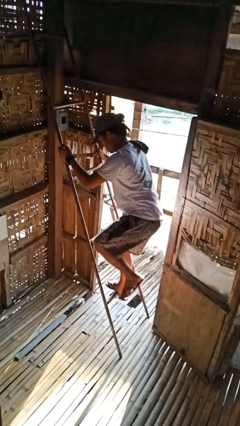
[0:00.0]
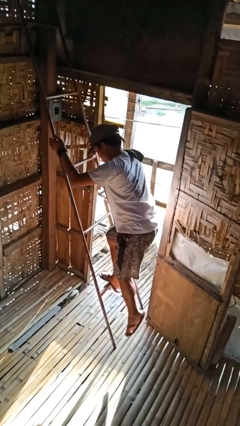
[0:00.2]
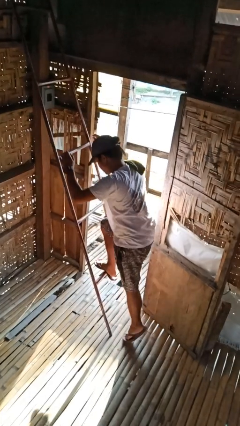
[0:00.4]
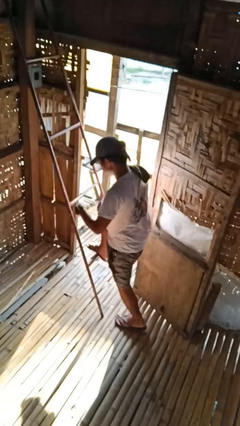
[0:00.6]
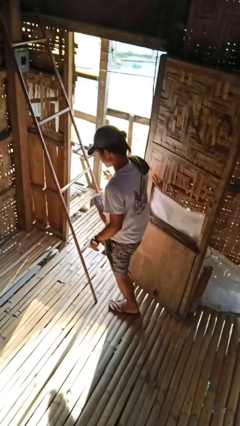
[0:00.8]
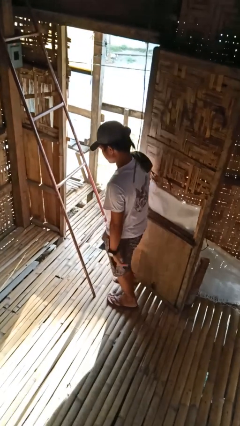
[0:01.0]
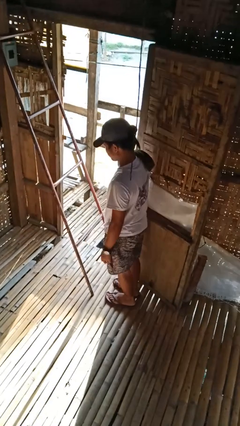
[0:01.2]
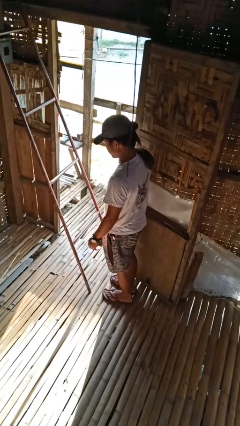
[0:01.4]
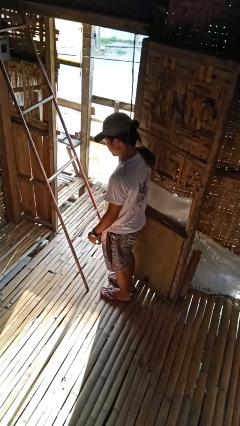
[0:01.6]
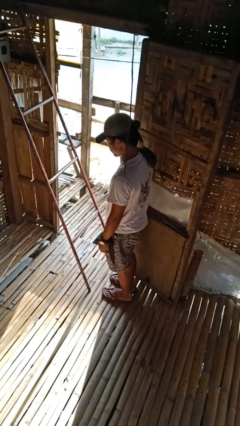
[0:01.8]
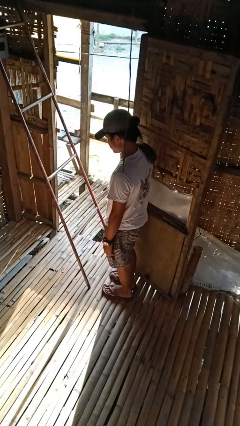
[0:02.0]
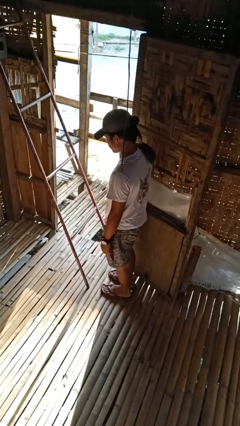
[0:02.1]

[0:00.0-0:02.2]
person climbs down ladder

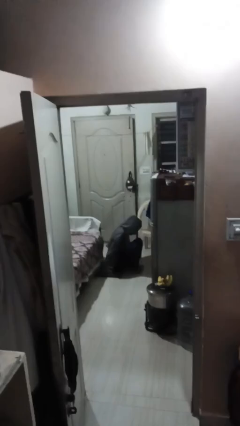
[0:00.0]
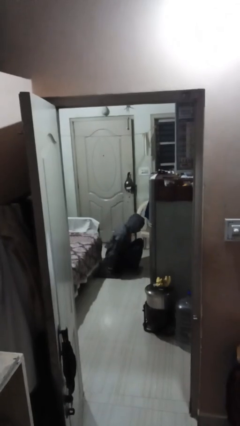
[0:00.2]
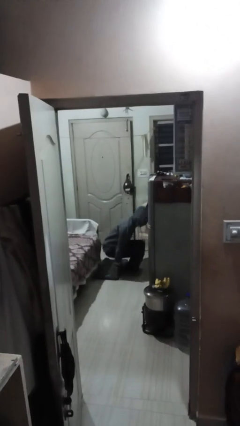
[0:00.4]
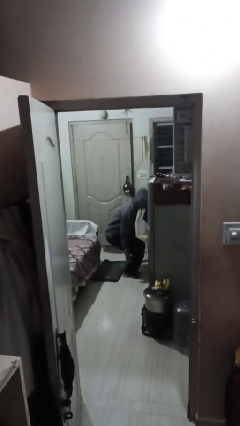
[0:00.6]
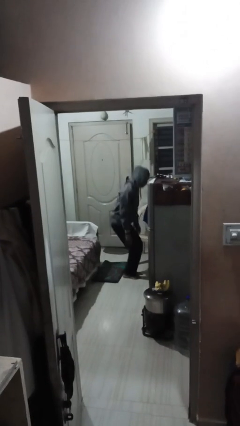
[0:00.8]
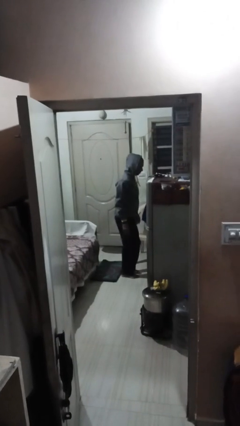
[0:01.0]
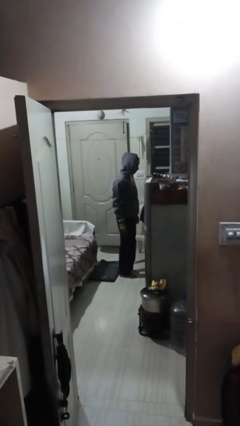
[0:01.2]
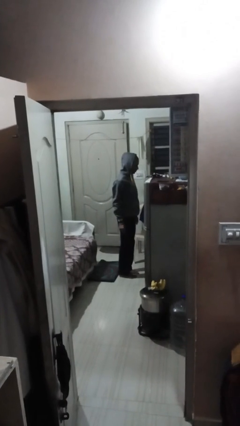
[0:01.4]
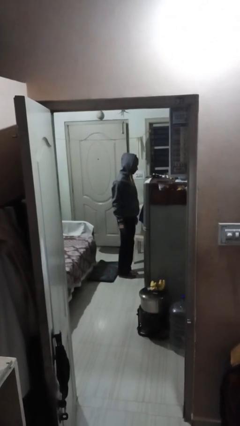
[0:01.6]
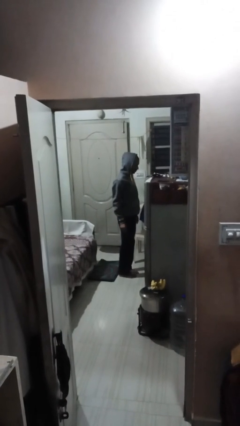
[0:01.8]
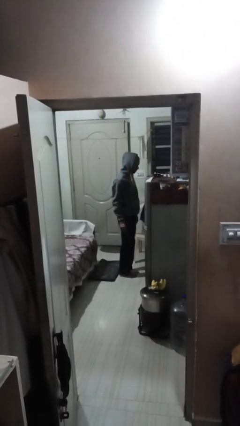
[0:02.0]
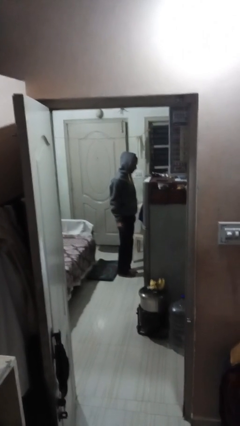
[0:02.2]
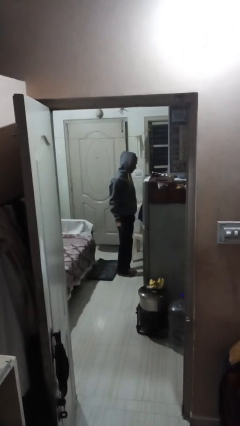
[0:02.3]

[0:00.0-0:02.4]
person stands up

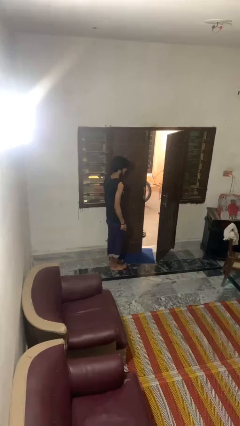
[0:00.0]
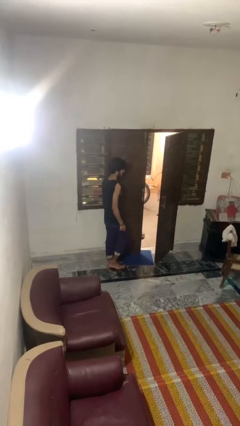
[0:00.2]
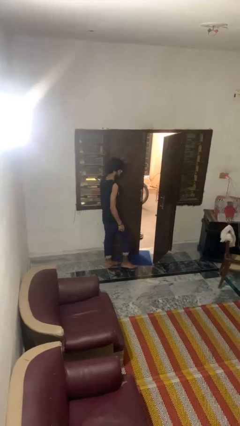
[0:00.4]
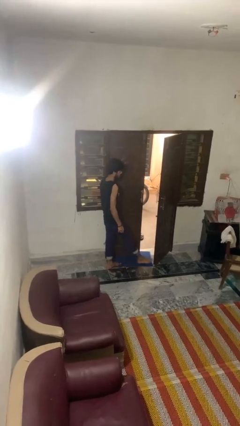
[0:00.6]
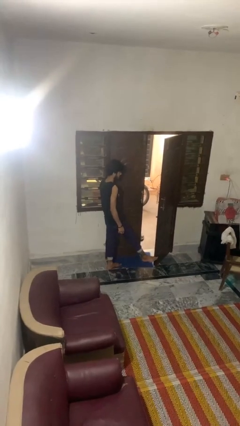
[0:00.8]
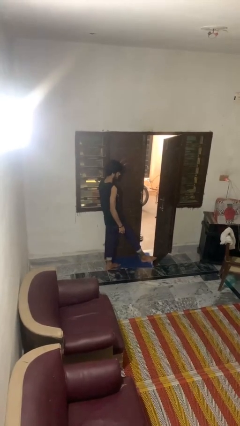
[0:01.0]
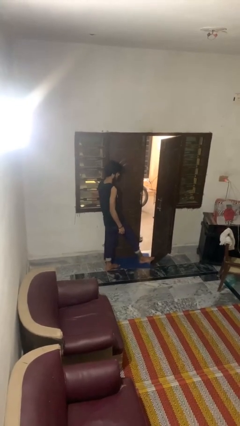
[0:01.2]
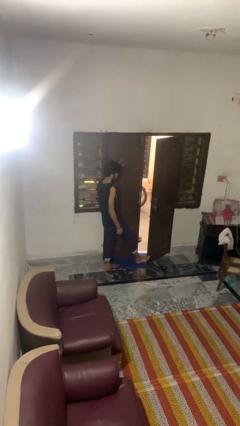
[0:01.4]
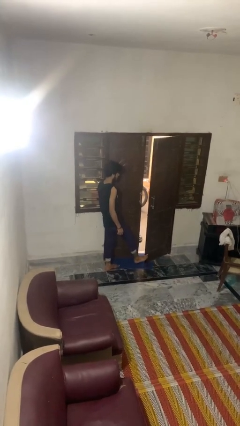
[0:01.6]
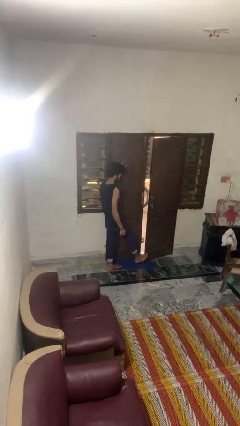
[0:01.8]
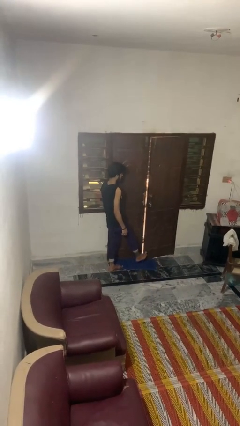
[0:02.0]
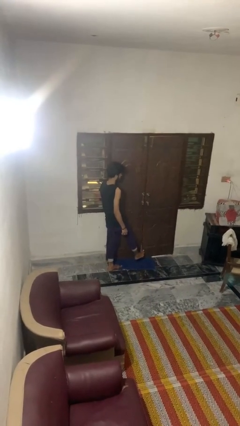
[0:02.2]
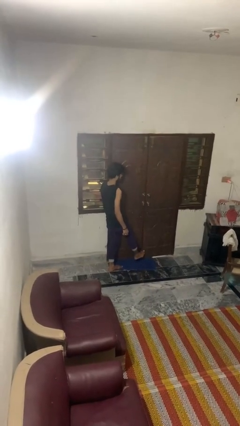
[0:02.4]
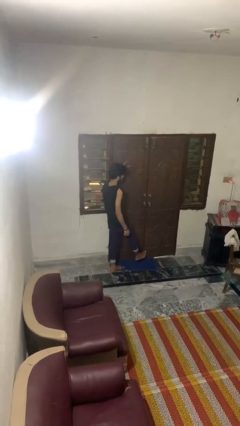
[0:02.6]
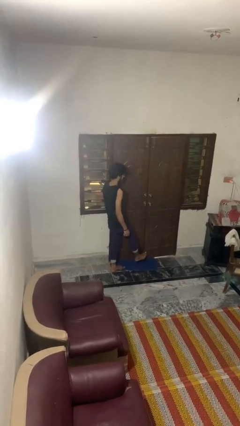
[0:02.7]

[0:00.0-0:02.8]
person closes door with foot

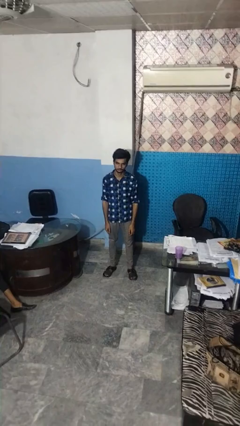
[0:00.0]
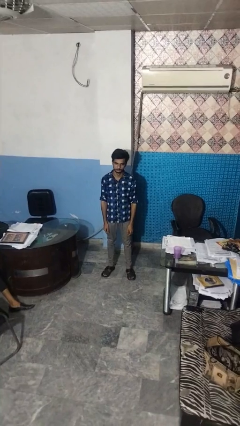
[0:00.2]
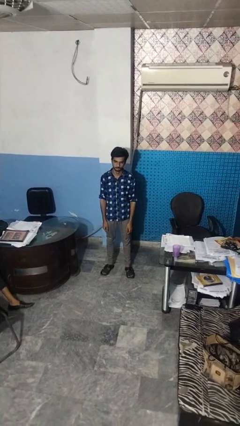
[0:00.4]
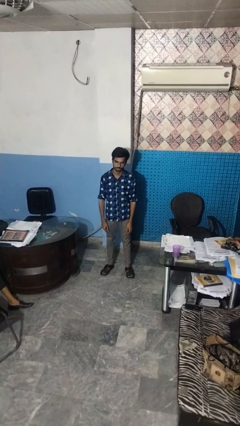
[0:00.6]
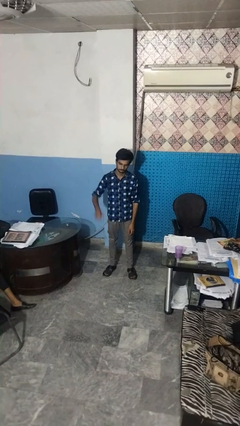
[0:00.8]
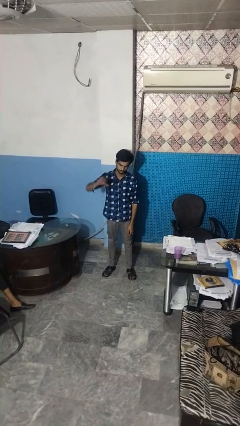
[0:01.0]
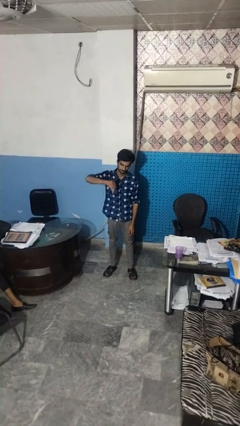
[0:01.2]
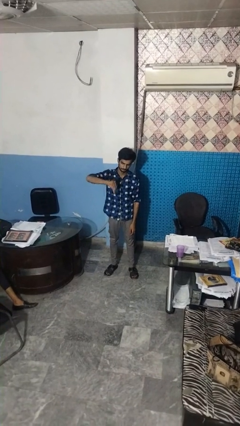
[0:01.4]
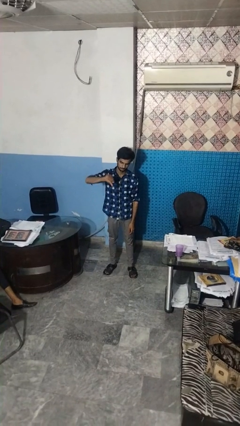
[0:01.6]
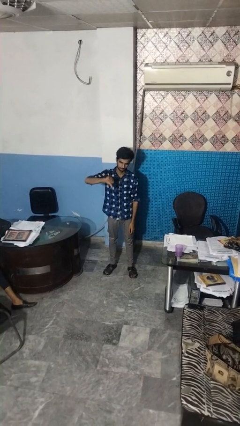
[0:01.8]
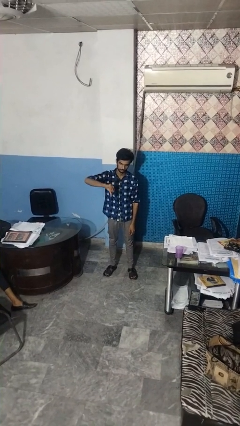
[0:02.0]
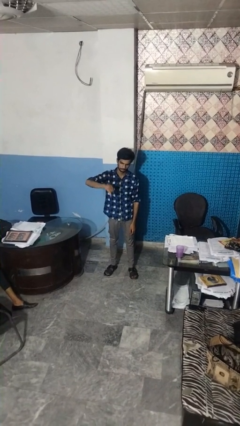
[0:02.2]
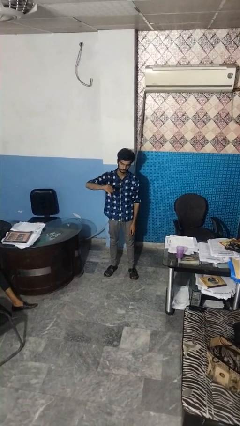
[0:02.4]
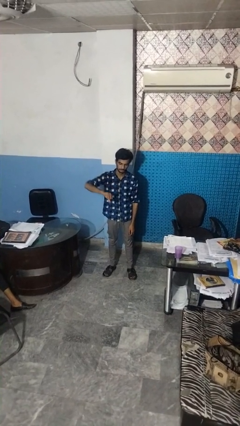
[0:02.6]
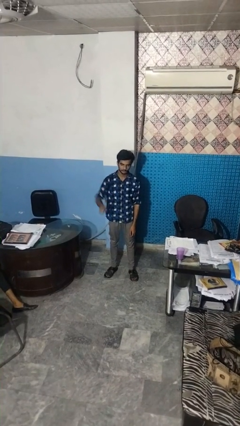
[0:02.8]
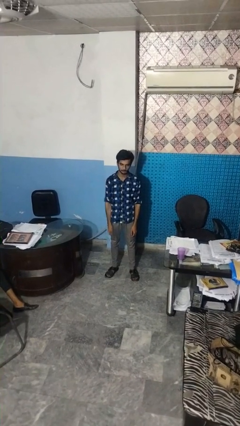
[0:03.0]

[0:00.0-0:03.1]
person gestures thumbs down

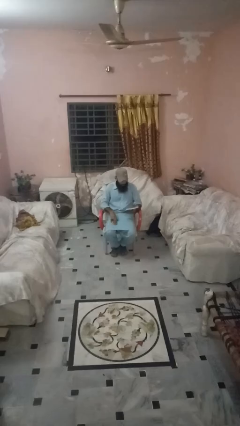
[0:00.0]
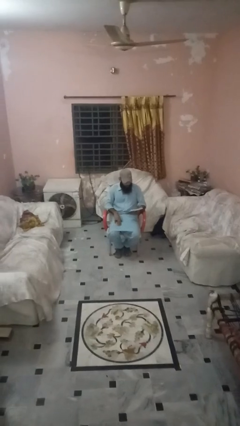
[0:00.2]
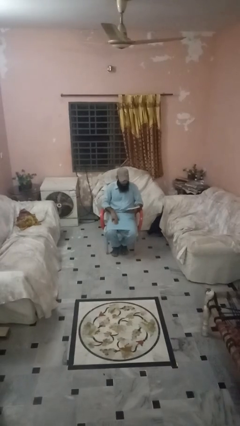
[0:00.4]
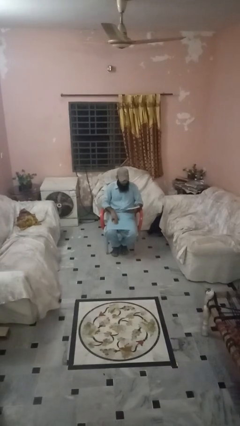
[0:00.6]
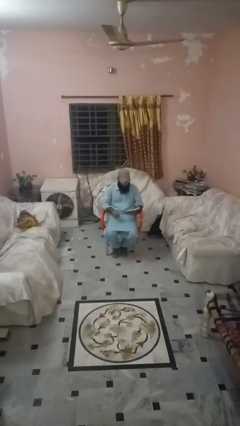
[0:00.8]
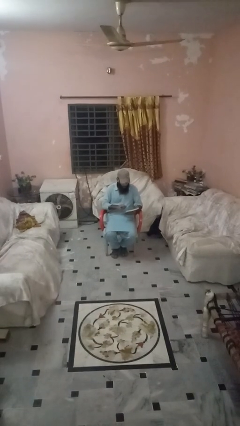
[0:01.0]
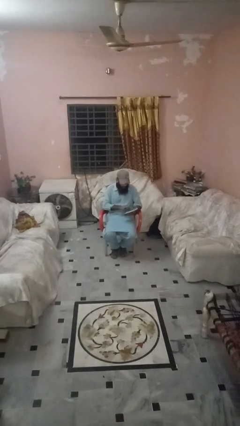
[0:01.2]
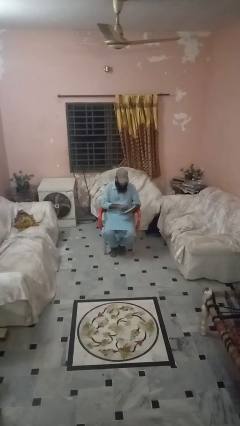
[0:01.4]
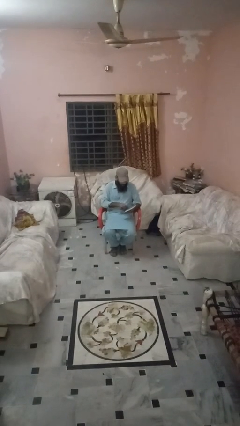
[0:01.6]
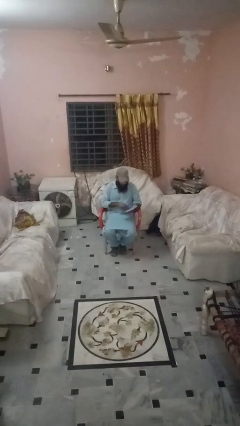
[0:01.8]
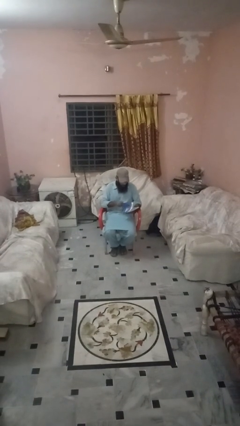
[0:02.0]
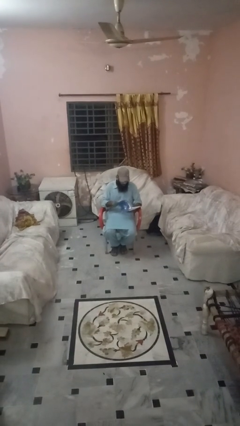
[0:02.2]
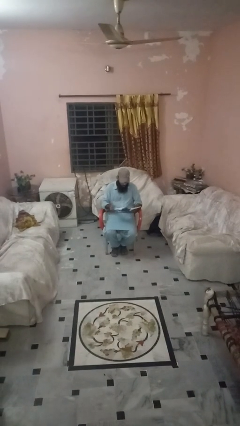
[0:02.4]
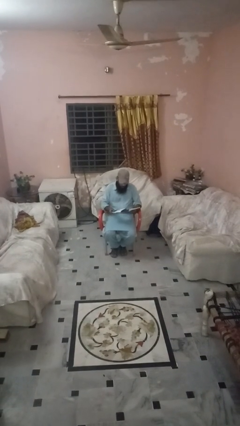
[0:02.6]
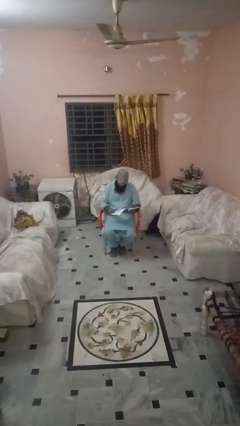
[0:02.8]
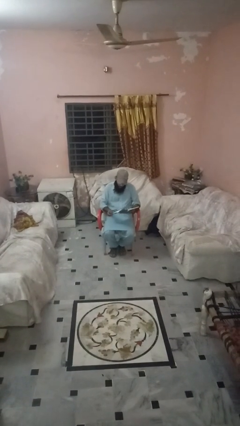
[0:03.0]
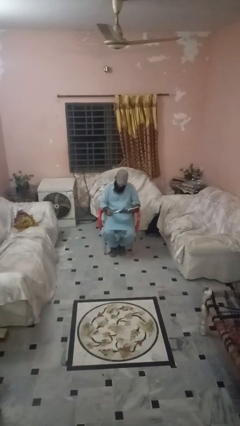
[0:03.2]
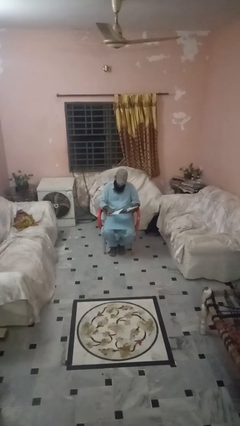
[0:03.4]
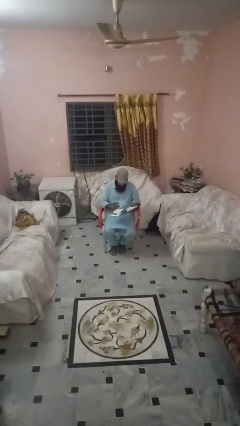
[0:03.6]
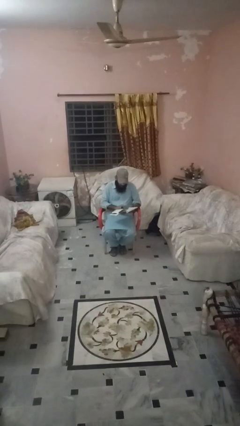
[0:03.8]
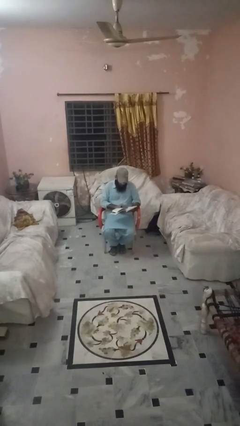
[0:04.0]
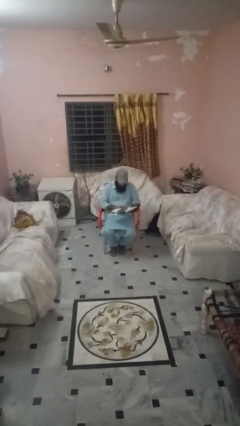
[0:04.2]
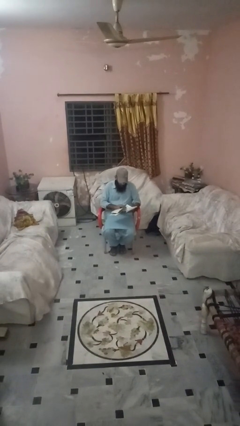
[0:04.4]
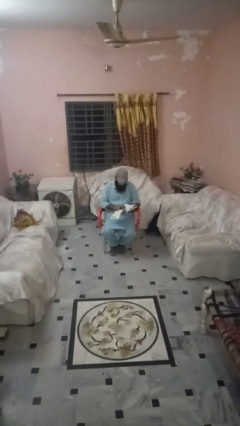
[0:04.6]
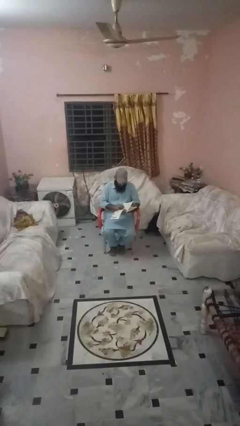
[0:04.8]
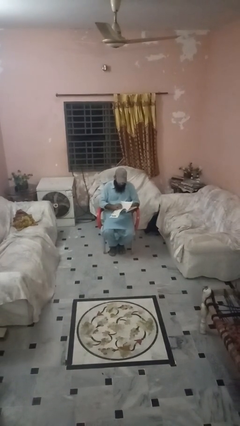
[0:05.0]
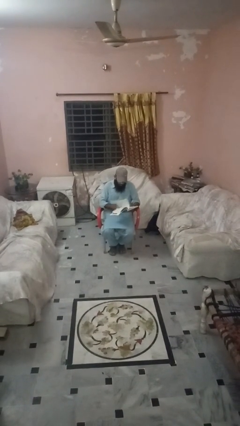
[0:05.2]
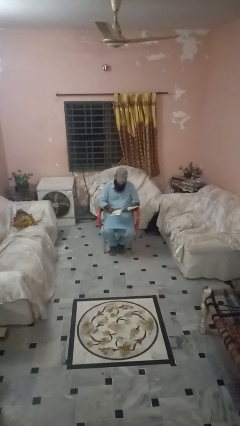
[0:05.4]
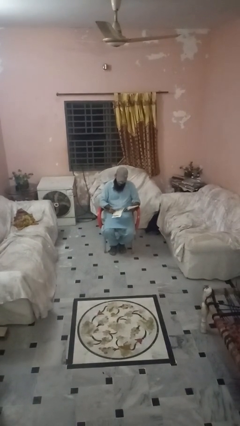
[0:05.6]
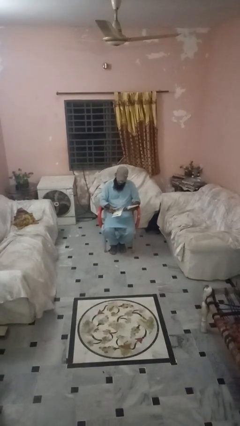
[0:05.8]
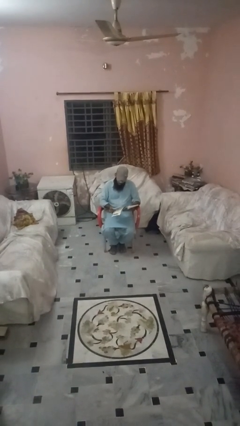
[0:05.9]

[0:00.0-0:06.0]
person reads book

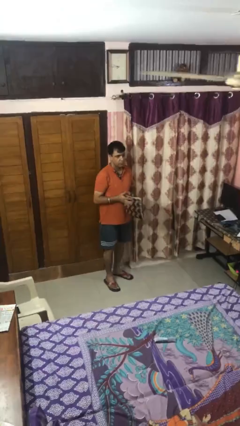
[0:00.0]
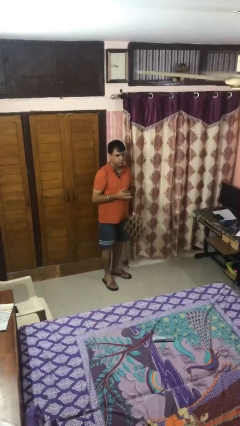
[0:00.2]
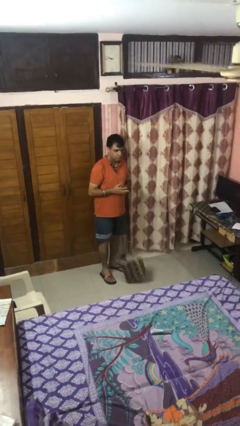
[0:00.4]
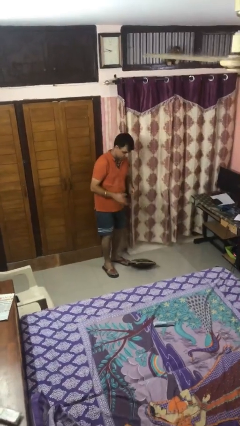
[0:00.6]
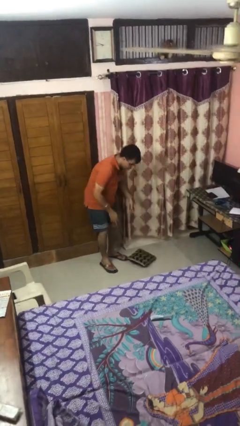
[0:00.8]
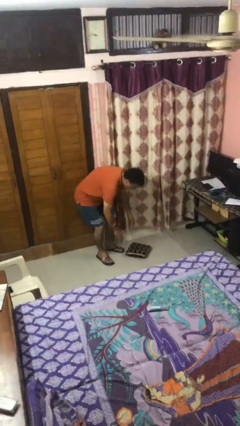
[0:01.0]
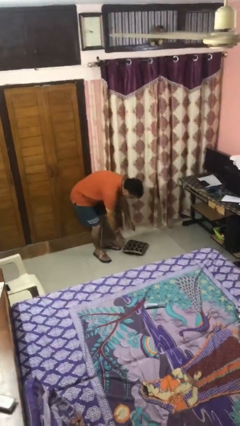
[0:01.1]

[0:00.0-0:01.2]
person drops object
